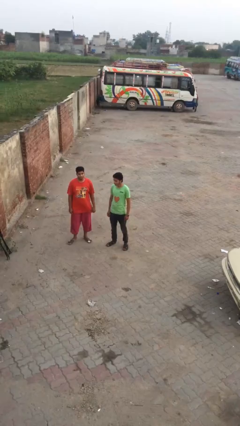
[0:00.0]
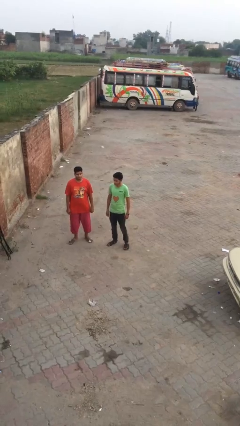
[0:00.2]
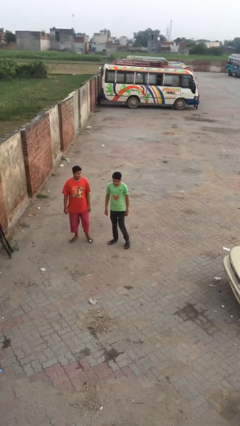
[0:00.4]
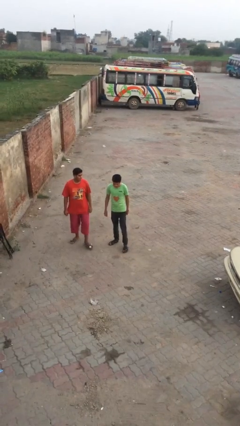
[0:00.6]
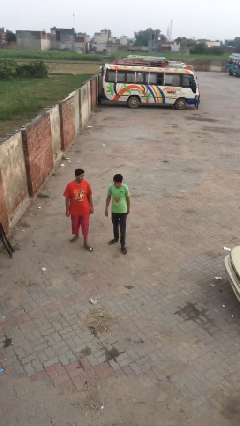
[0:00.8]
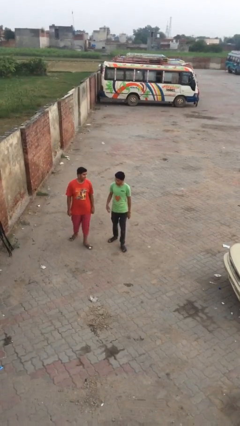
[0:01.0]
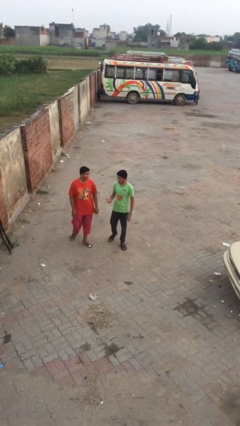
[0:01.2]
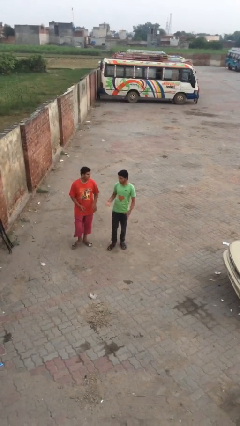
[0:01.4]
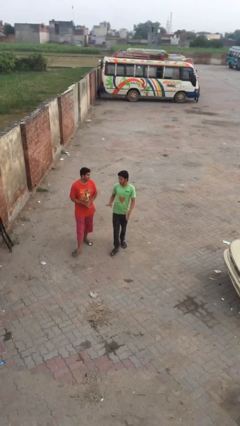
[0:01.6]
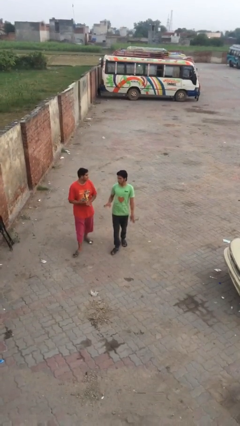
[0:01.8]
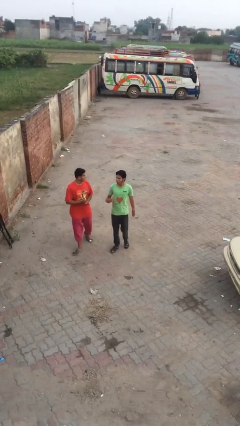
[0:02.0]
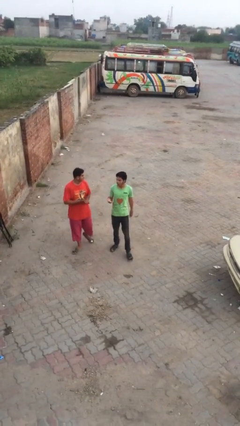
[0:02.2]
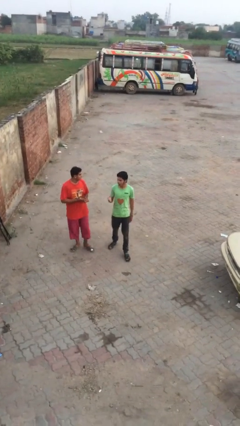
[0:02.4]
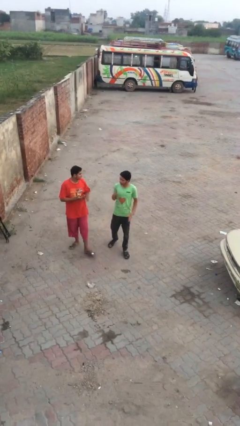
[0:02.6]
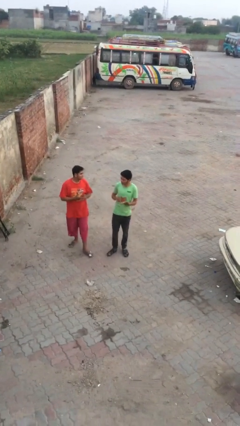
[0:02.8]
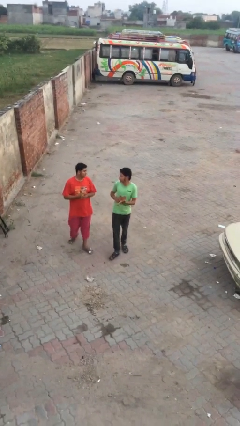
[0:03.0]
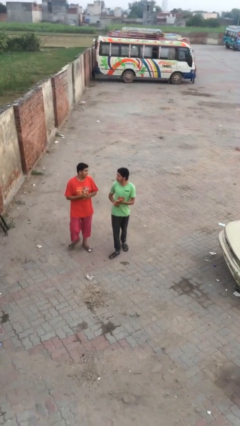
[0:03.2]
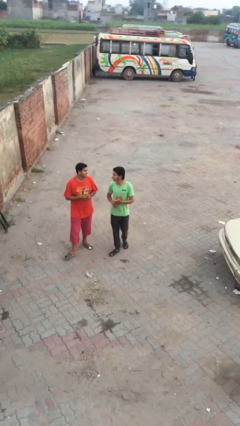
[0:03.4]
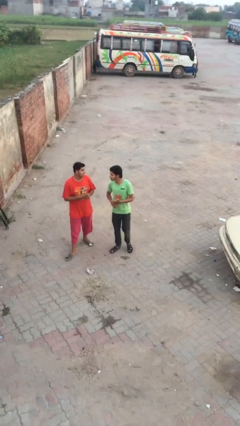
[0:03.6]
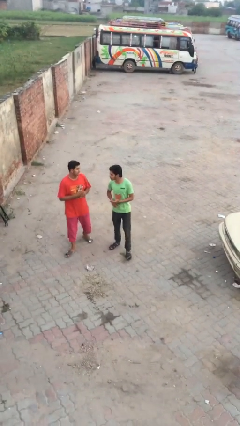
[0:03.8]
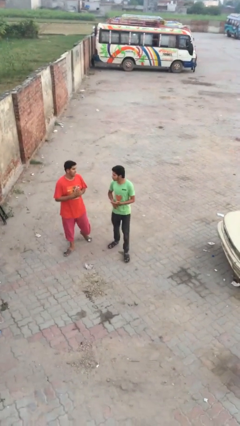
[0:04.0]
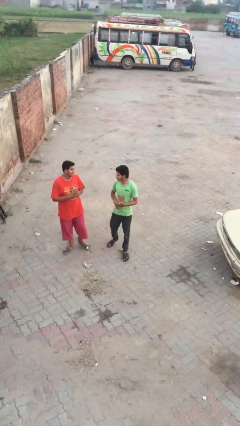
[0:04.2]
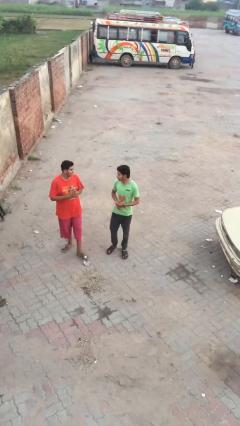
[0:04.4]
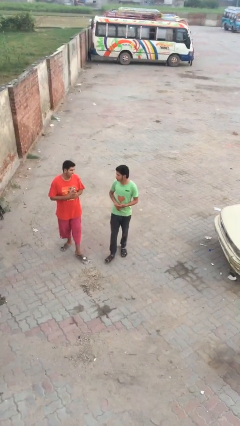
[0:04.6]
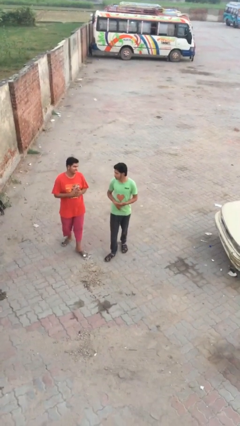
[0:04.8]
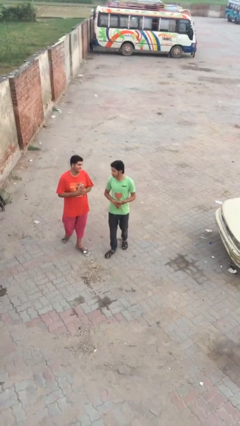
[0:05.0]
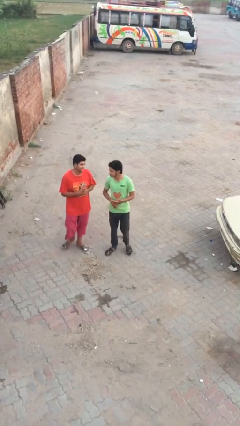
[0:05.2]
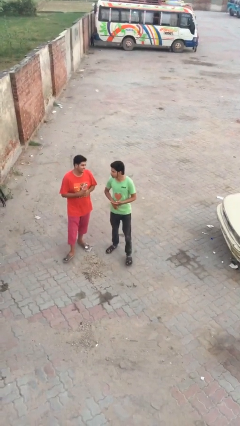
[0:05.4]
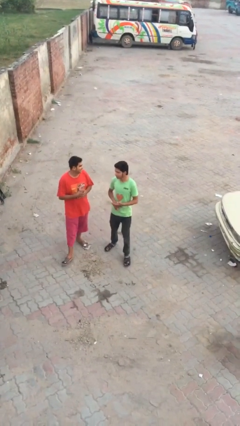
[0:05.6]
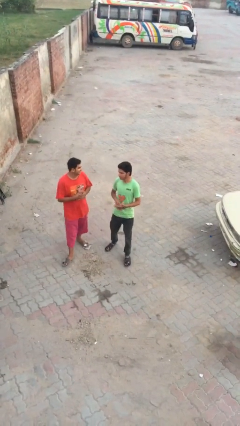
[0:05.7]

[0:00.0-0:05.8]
person talks to person

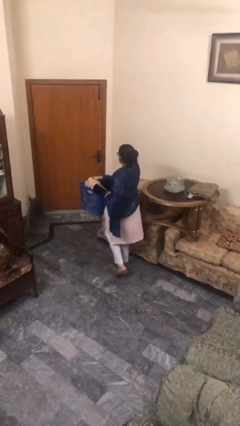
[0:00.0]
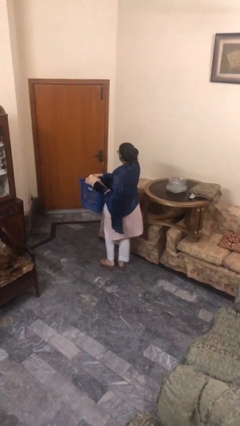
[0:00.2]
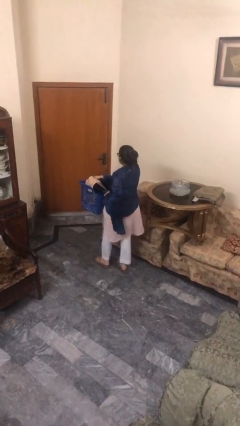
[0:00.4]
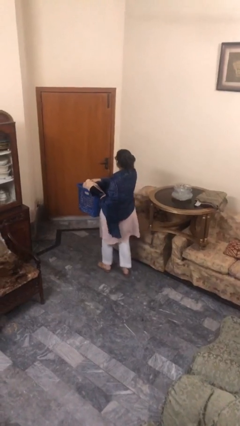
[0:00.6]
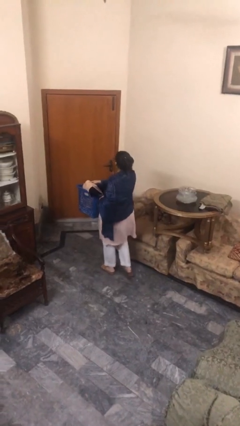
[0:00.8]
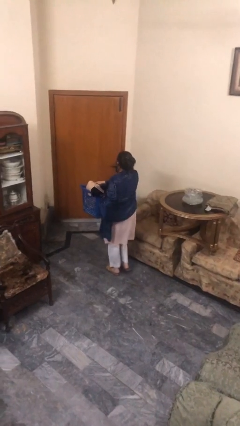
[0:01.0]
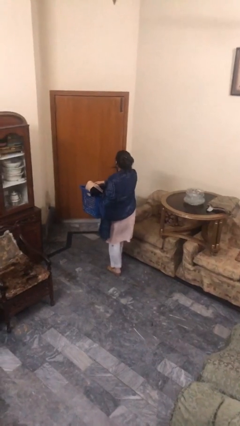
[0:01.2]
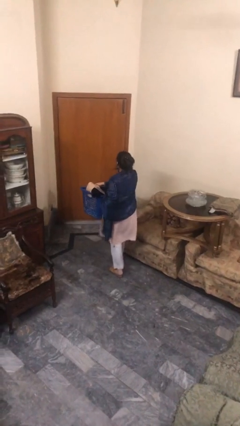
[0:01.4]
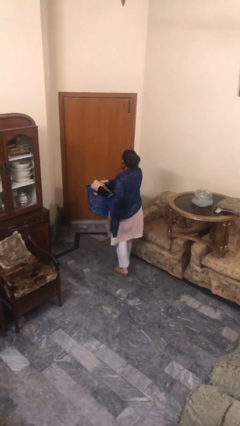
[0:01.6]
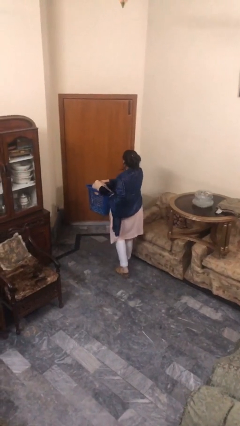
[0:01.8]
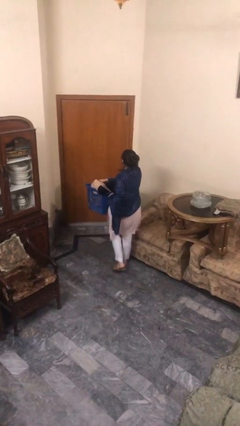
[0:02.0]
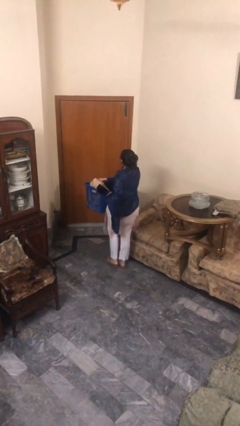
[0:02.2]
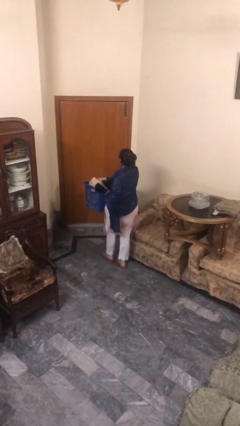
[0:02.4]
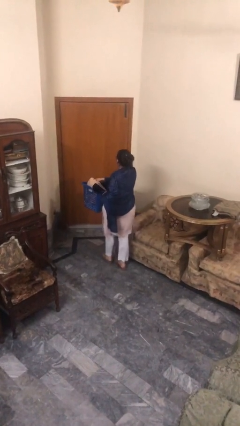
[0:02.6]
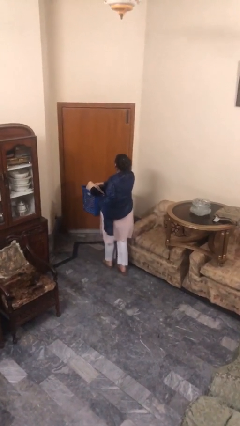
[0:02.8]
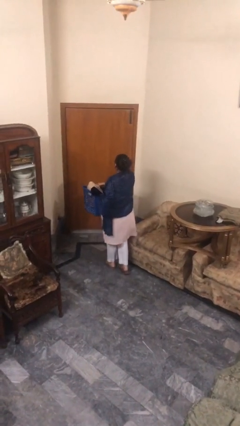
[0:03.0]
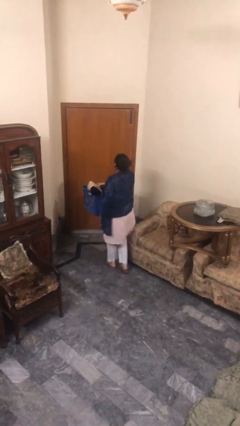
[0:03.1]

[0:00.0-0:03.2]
person carries laundry basket

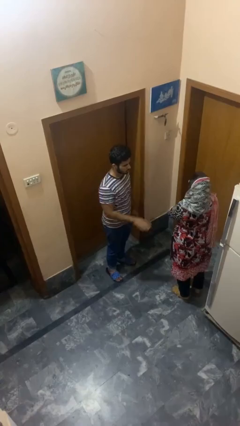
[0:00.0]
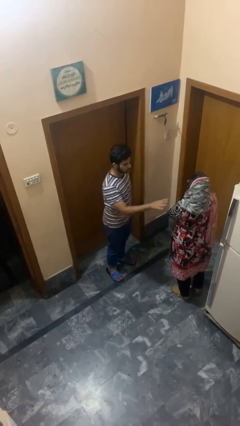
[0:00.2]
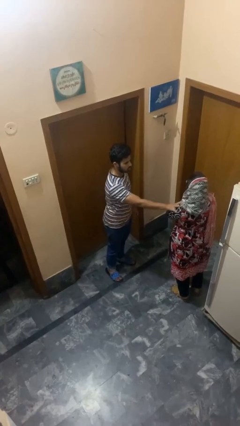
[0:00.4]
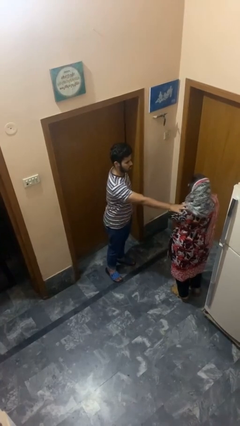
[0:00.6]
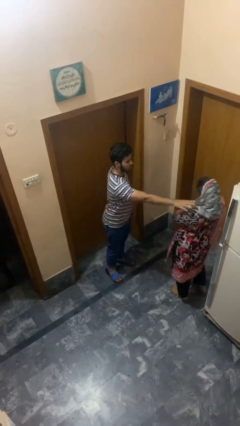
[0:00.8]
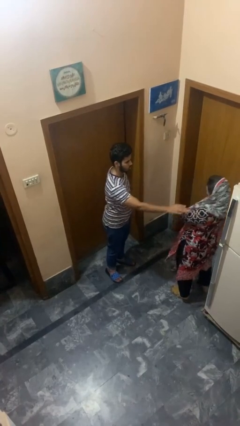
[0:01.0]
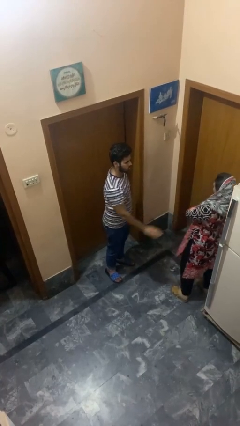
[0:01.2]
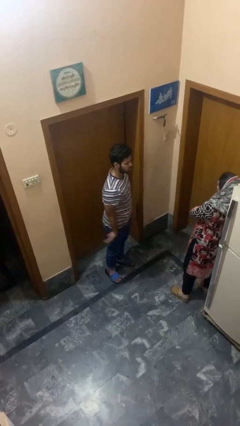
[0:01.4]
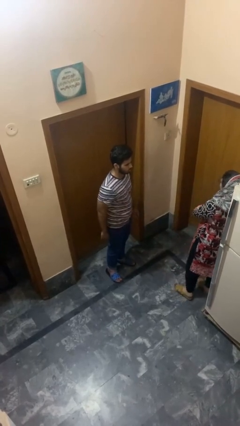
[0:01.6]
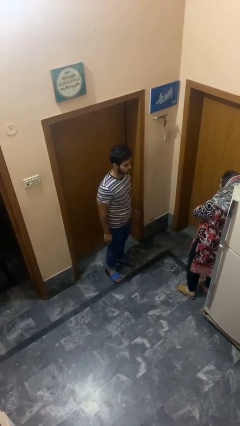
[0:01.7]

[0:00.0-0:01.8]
person shoves person

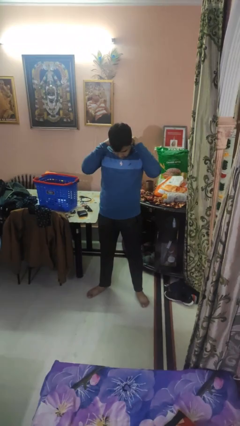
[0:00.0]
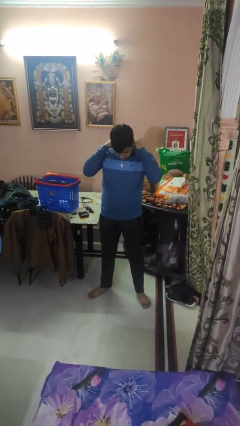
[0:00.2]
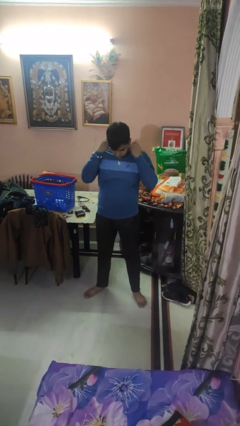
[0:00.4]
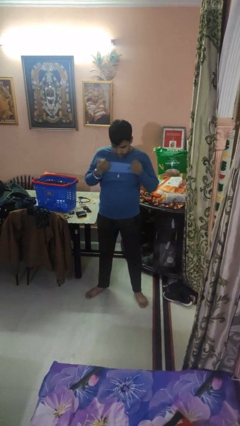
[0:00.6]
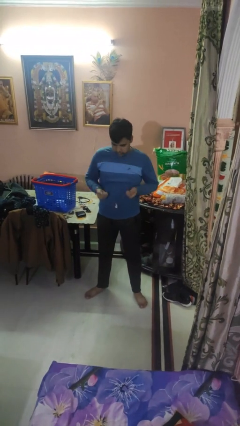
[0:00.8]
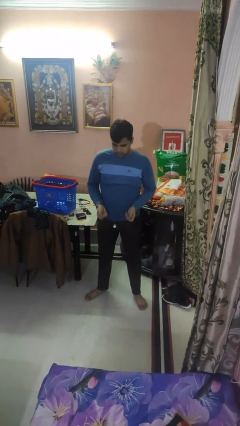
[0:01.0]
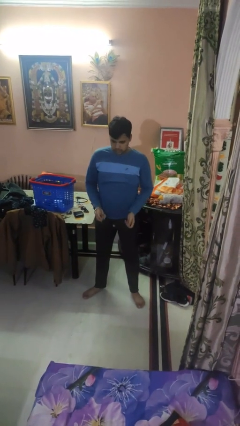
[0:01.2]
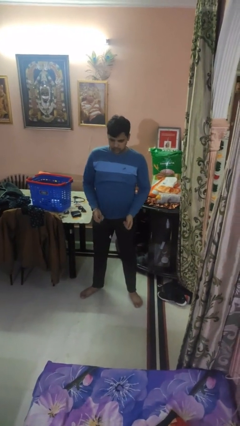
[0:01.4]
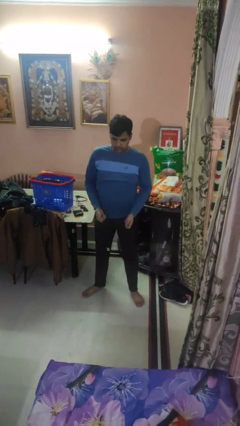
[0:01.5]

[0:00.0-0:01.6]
person takes off necklace

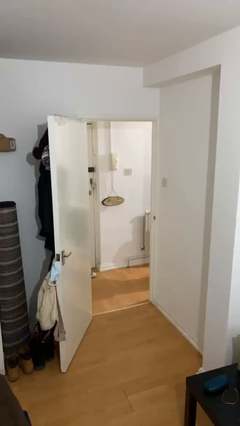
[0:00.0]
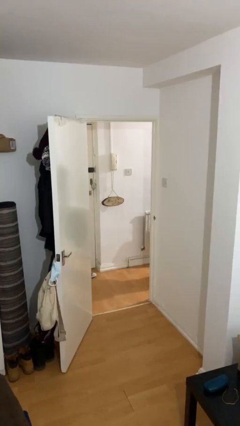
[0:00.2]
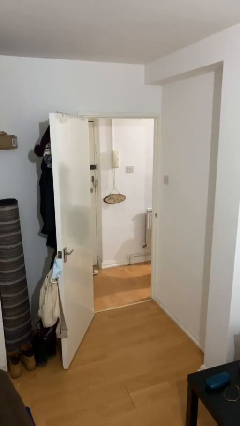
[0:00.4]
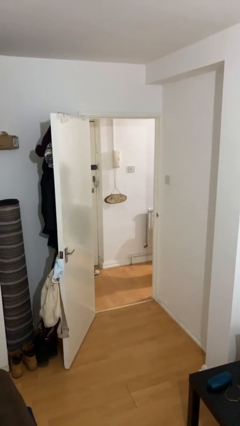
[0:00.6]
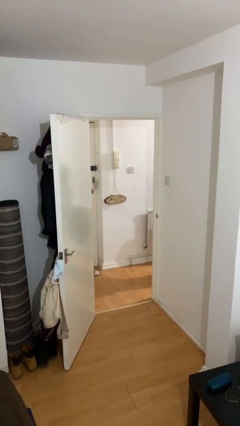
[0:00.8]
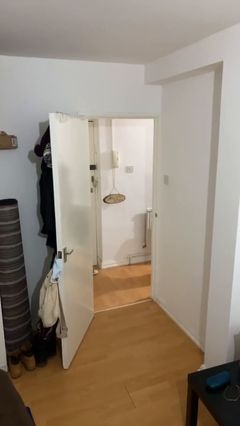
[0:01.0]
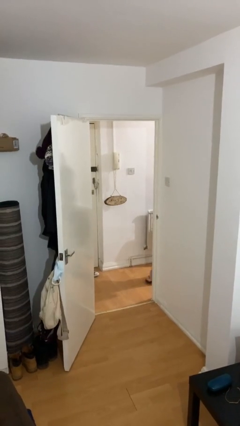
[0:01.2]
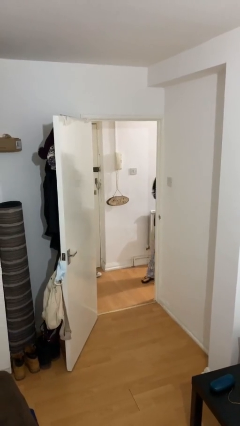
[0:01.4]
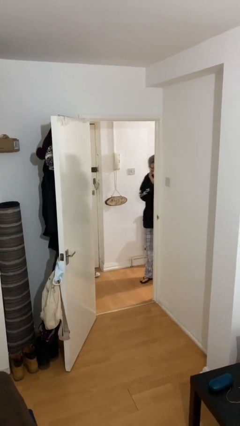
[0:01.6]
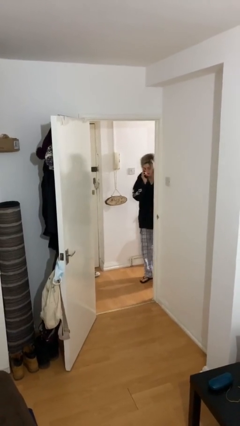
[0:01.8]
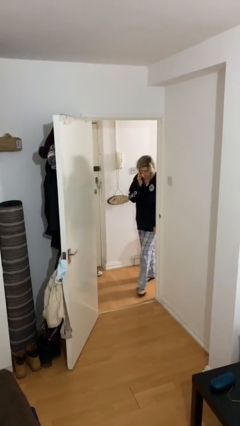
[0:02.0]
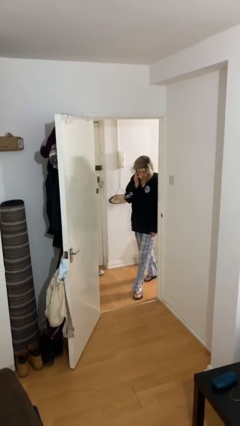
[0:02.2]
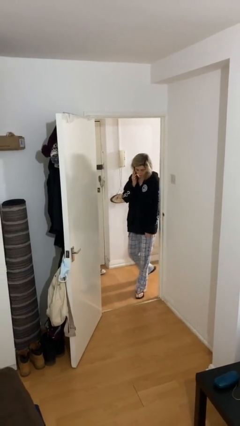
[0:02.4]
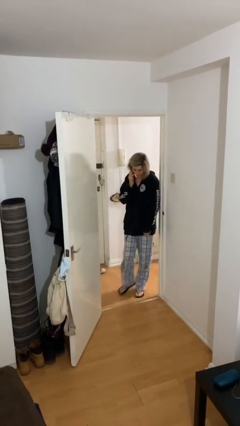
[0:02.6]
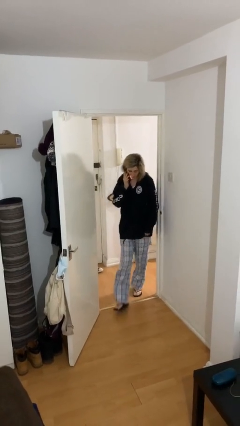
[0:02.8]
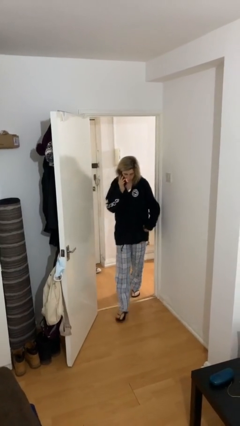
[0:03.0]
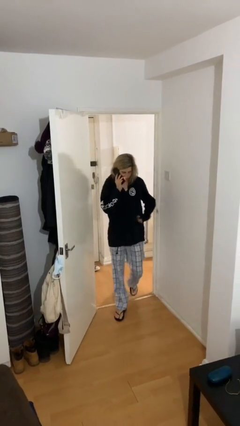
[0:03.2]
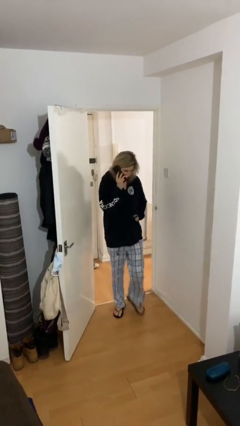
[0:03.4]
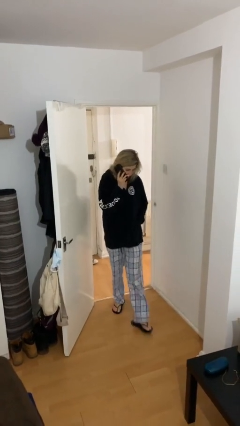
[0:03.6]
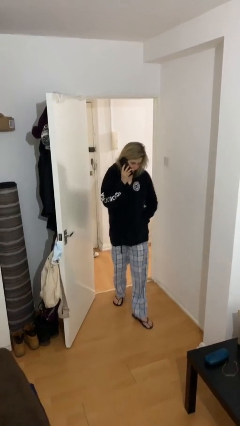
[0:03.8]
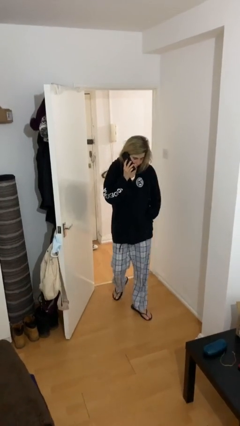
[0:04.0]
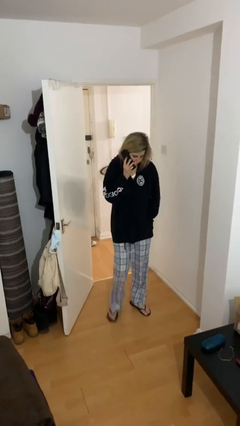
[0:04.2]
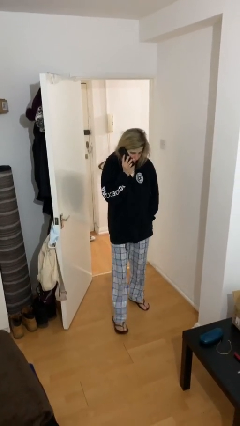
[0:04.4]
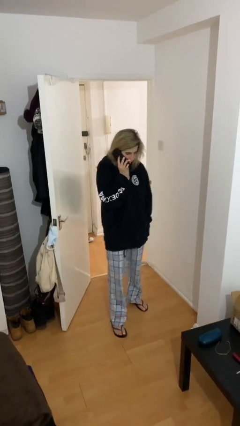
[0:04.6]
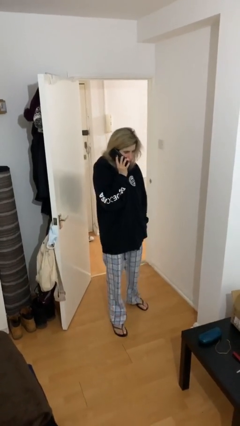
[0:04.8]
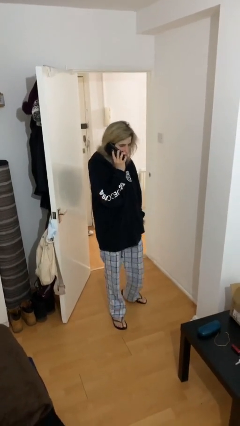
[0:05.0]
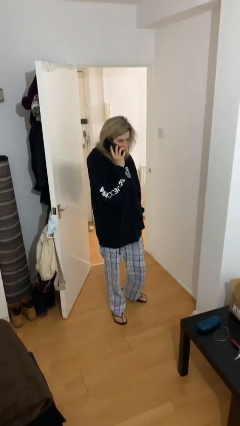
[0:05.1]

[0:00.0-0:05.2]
person enters scene through structure
